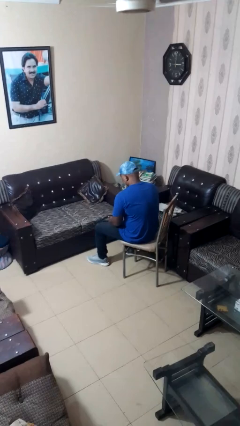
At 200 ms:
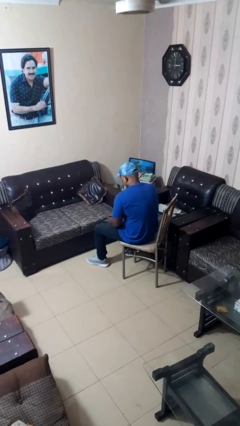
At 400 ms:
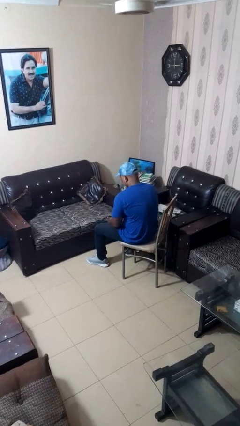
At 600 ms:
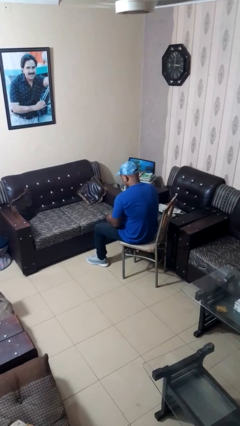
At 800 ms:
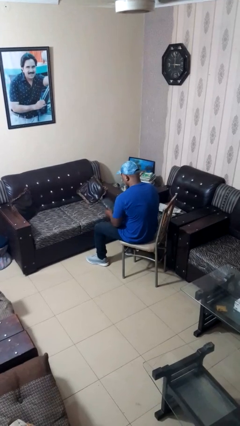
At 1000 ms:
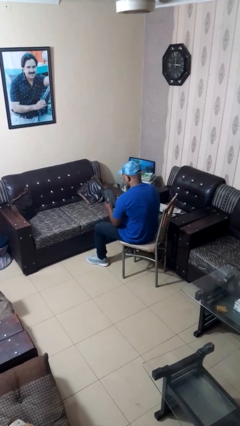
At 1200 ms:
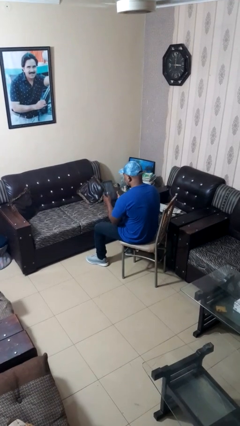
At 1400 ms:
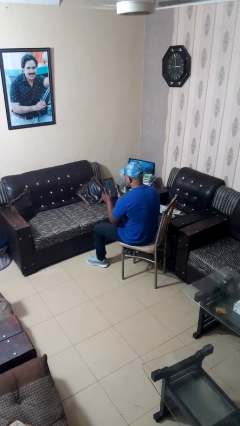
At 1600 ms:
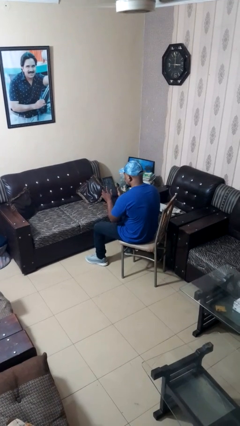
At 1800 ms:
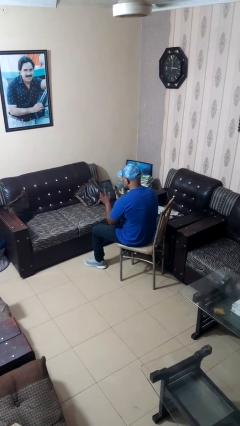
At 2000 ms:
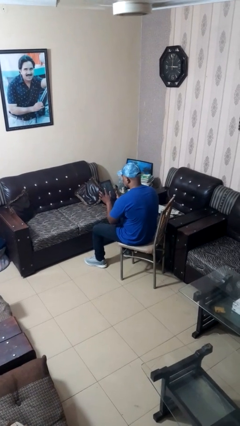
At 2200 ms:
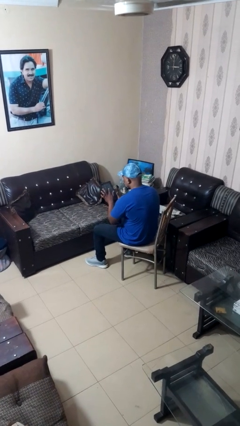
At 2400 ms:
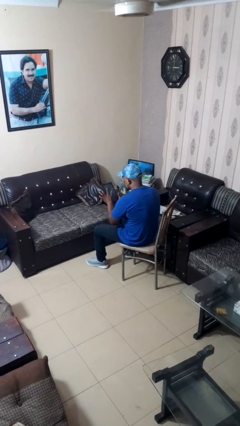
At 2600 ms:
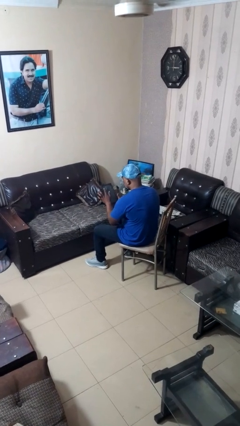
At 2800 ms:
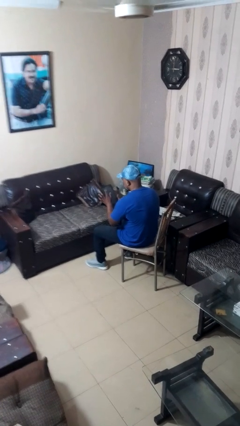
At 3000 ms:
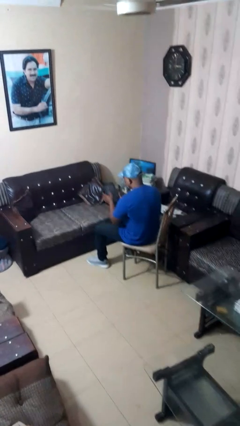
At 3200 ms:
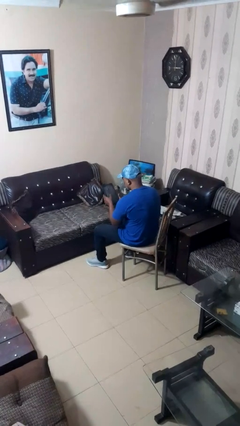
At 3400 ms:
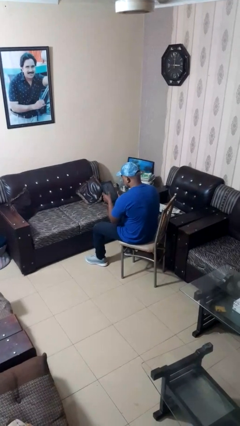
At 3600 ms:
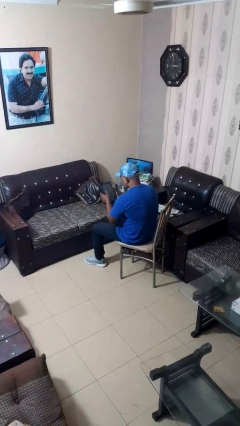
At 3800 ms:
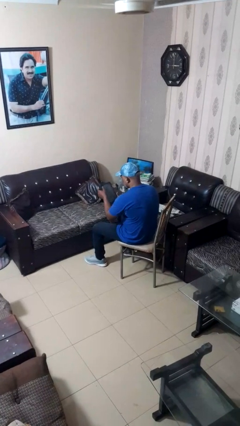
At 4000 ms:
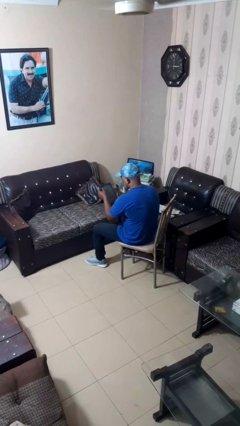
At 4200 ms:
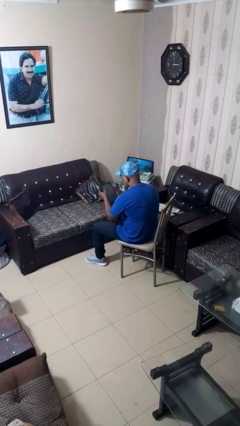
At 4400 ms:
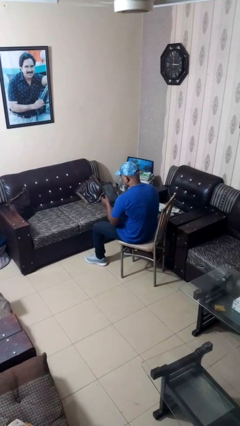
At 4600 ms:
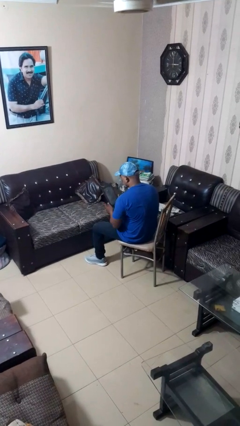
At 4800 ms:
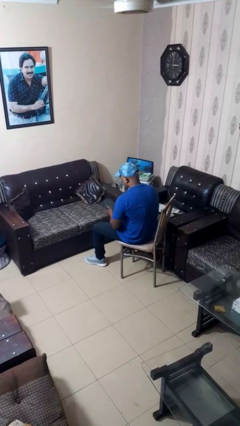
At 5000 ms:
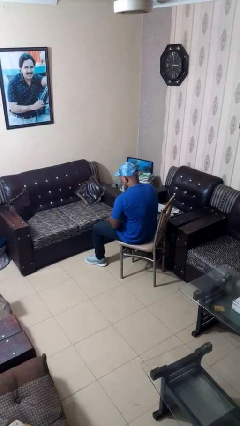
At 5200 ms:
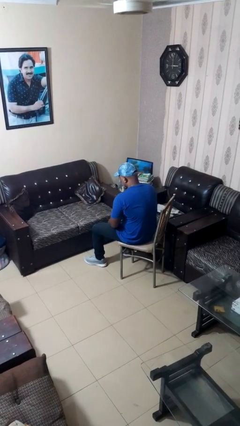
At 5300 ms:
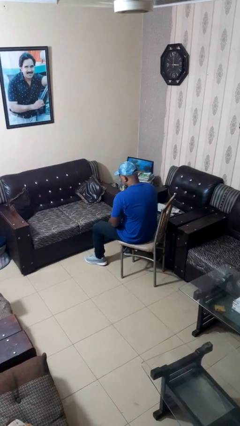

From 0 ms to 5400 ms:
person interacts with tablet

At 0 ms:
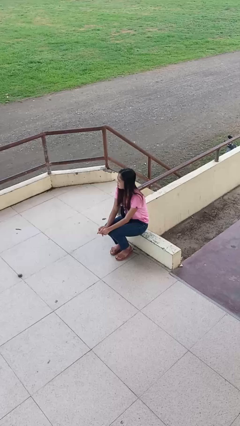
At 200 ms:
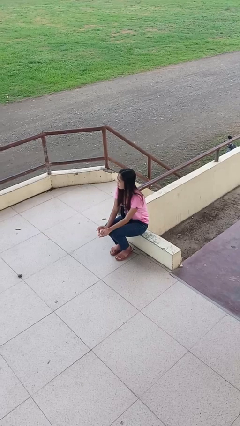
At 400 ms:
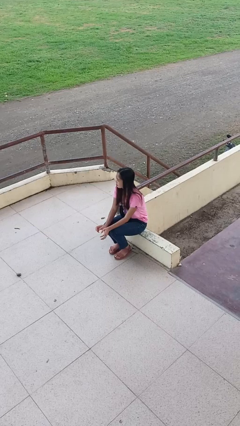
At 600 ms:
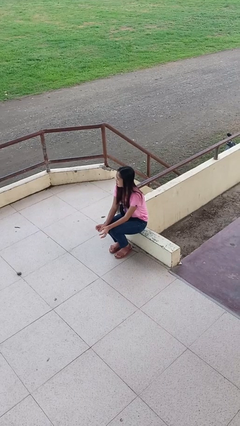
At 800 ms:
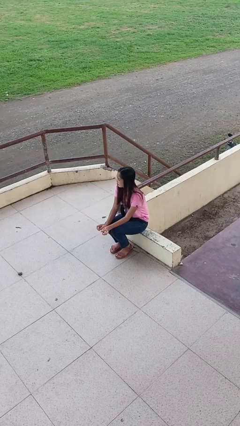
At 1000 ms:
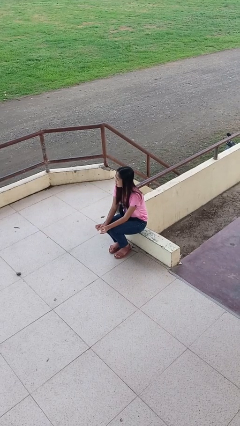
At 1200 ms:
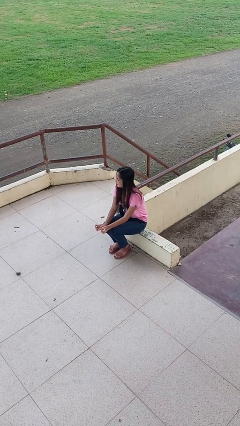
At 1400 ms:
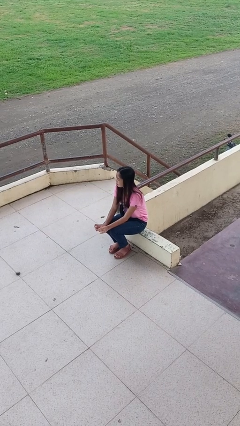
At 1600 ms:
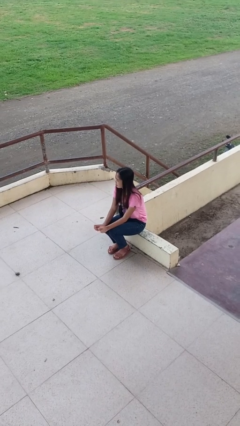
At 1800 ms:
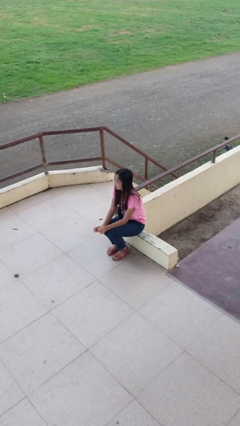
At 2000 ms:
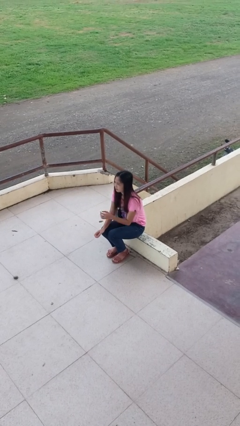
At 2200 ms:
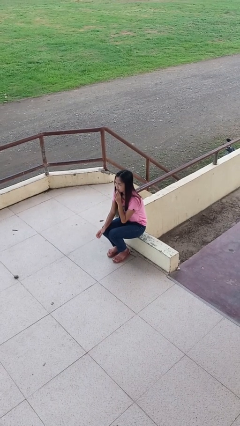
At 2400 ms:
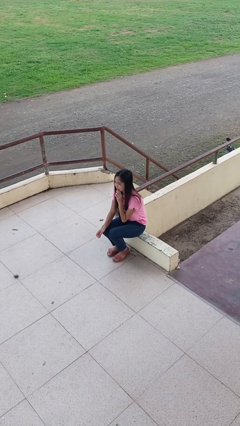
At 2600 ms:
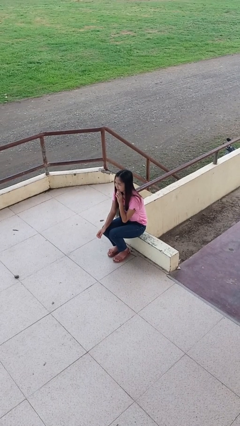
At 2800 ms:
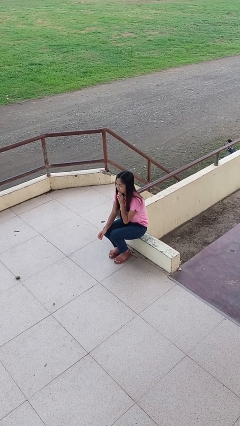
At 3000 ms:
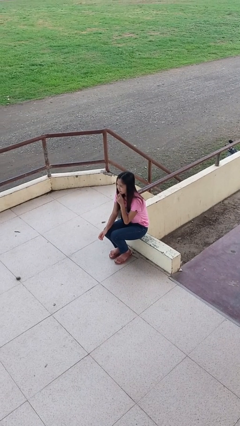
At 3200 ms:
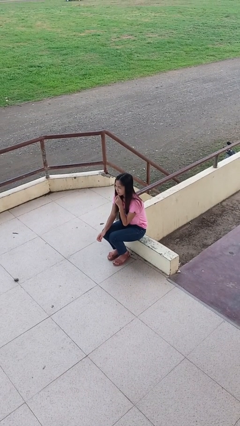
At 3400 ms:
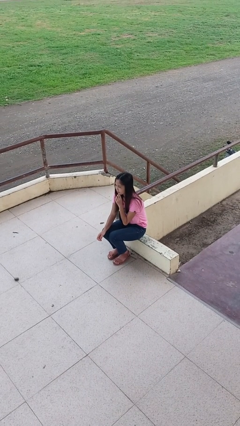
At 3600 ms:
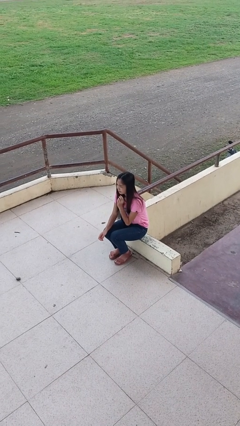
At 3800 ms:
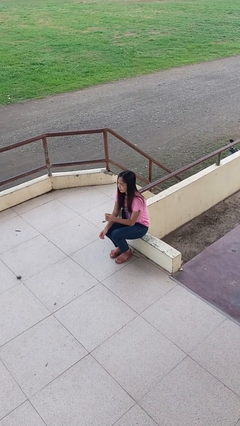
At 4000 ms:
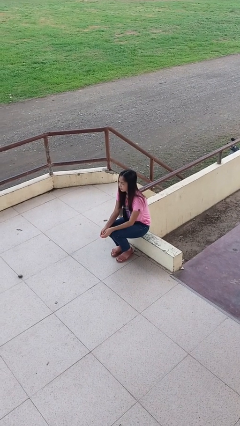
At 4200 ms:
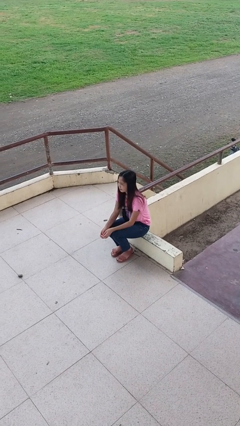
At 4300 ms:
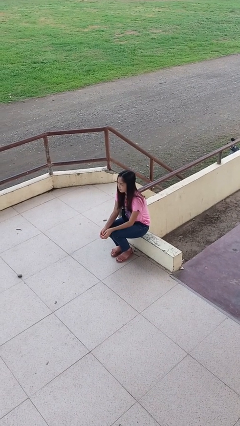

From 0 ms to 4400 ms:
person strokes chin

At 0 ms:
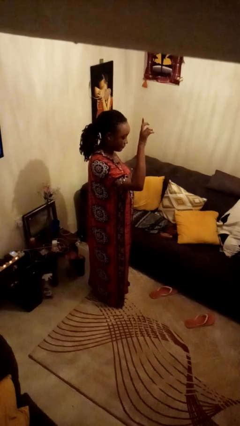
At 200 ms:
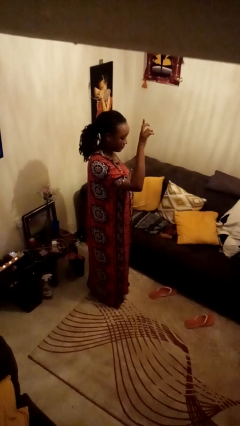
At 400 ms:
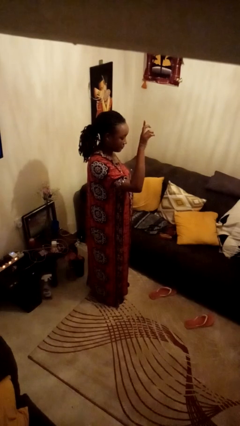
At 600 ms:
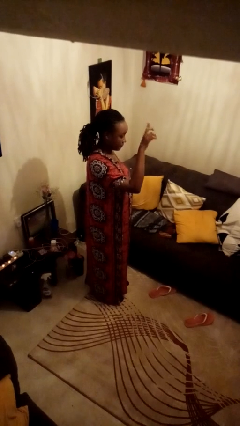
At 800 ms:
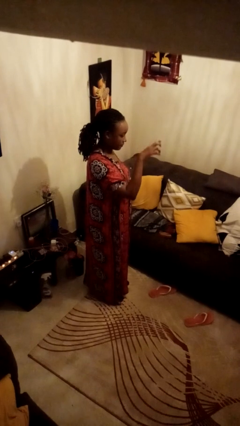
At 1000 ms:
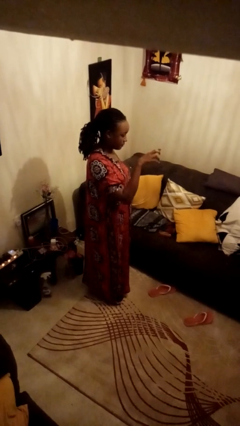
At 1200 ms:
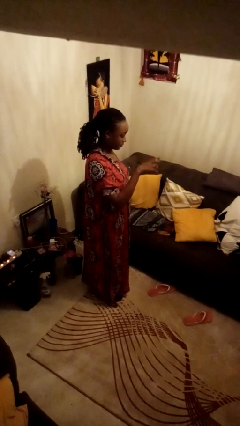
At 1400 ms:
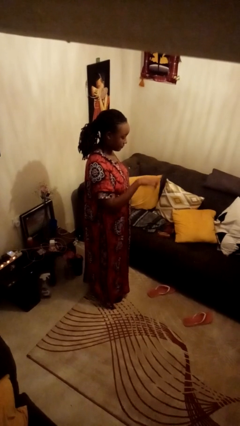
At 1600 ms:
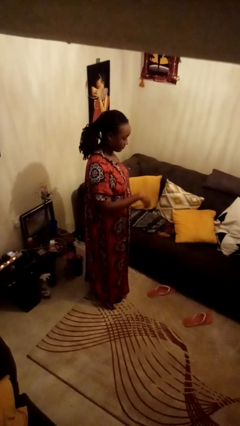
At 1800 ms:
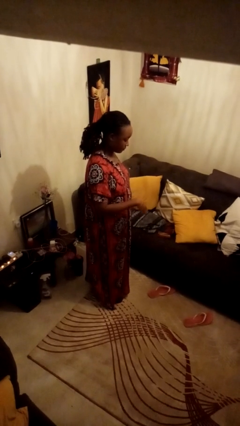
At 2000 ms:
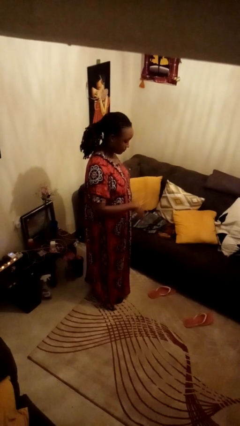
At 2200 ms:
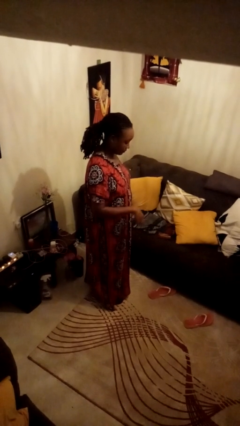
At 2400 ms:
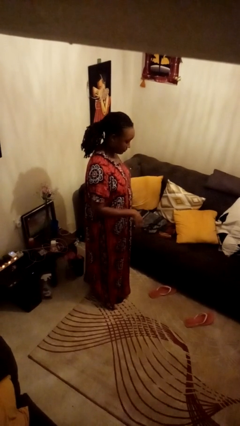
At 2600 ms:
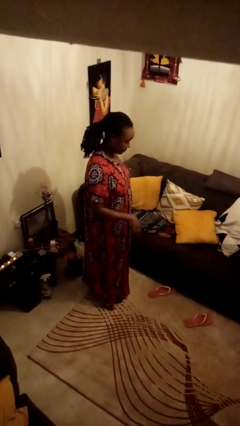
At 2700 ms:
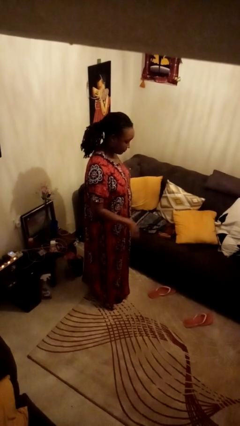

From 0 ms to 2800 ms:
person gestures swipe down

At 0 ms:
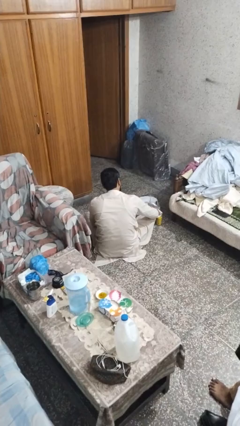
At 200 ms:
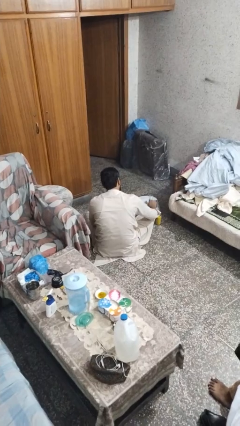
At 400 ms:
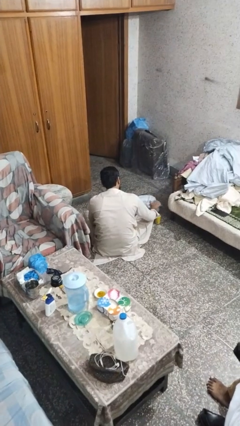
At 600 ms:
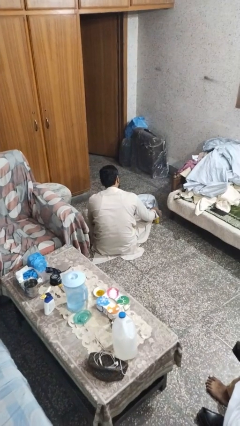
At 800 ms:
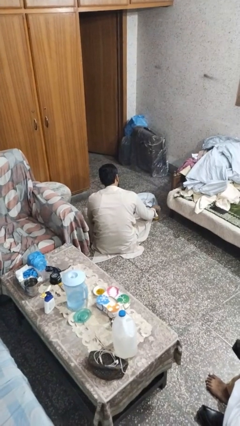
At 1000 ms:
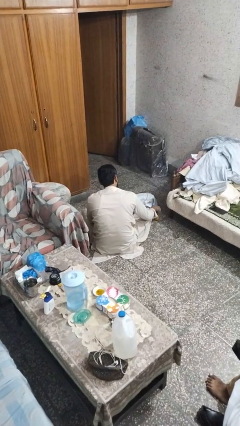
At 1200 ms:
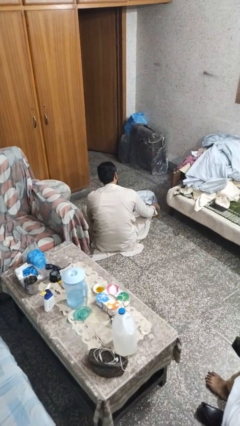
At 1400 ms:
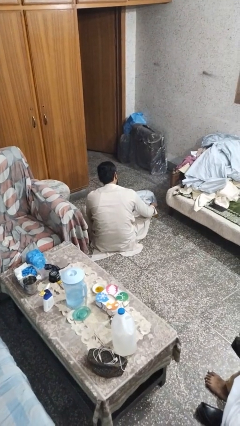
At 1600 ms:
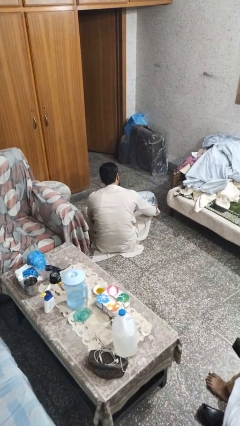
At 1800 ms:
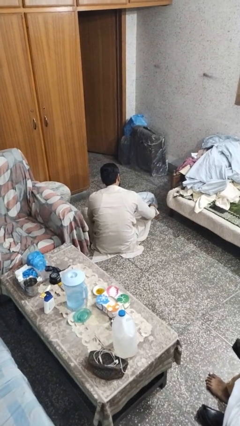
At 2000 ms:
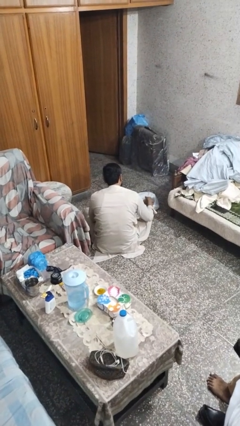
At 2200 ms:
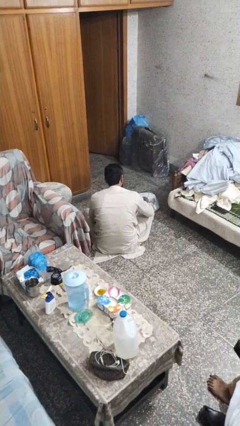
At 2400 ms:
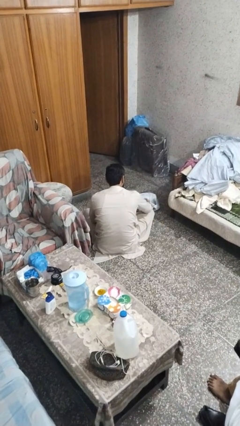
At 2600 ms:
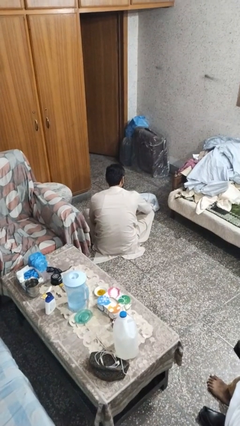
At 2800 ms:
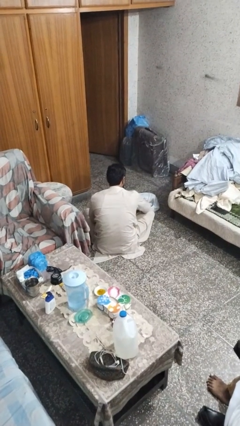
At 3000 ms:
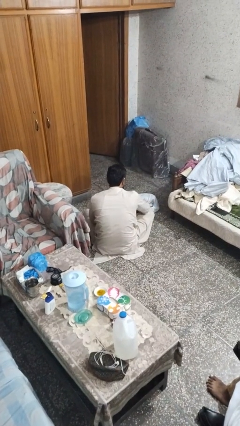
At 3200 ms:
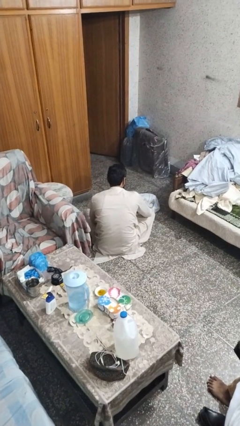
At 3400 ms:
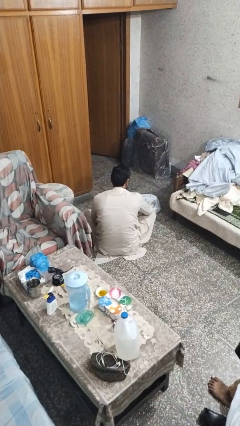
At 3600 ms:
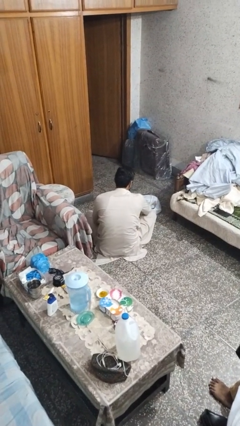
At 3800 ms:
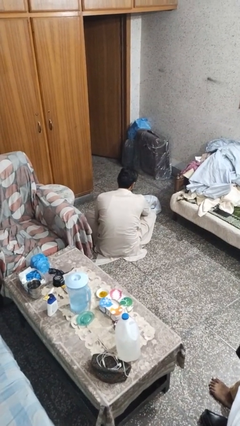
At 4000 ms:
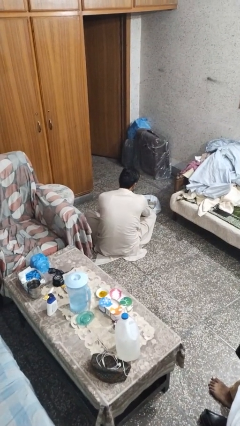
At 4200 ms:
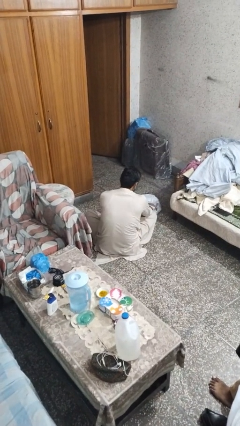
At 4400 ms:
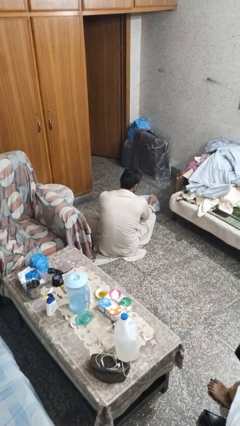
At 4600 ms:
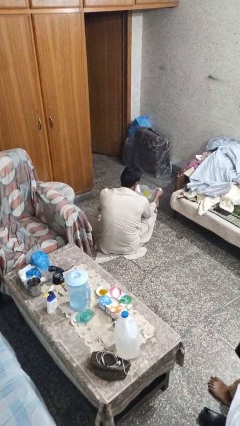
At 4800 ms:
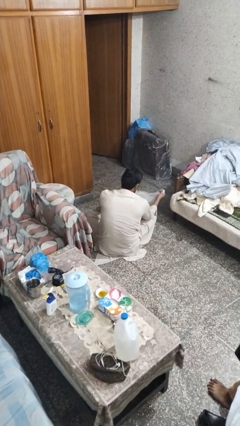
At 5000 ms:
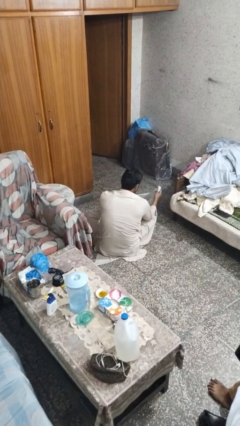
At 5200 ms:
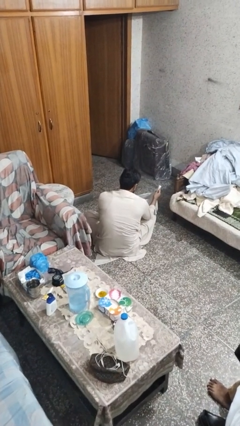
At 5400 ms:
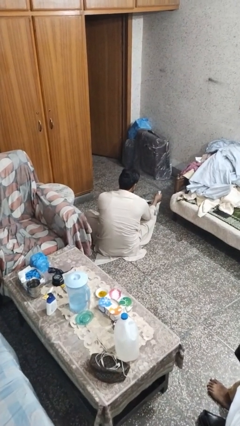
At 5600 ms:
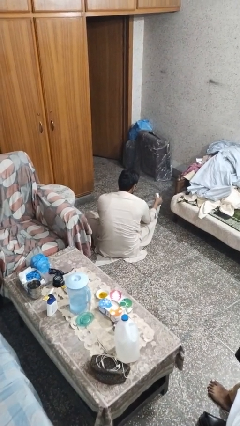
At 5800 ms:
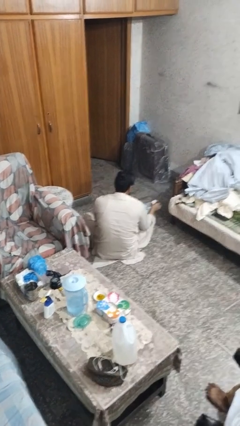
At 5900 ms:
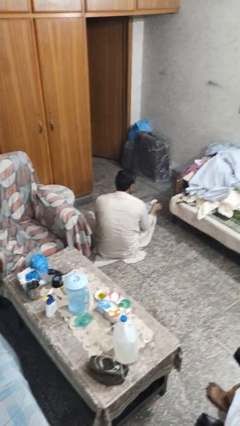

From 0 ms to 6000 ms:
person puts object into bag
